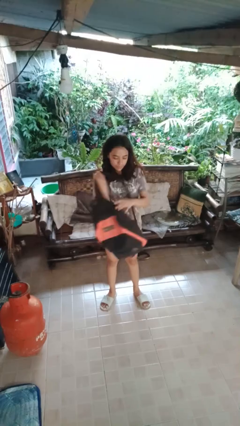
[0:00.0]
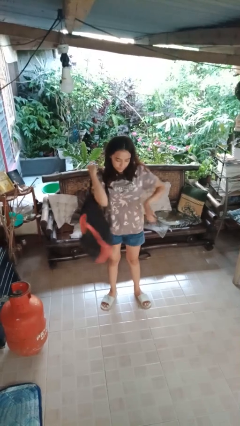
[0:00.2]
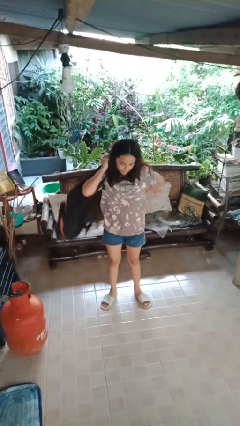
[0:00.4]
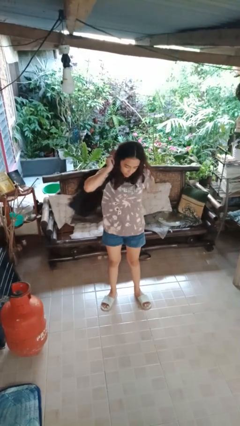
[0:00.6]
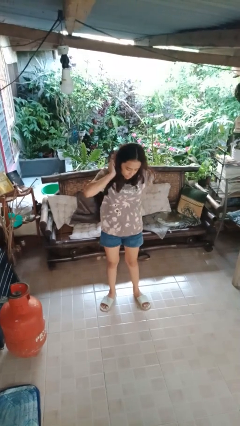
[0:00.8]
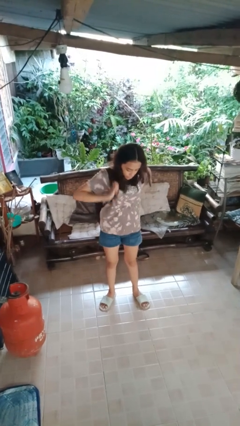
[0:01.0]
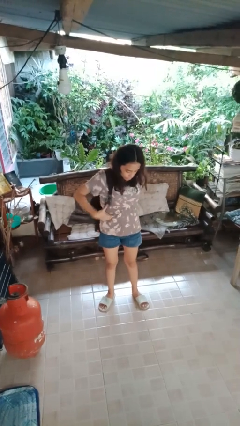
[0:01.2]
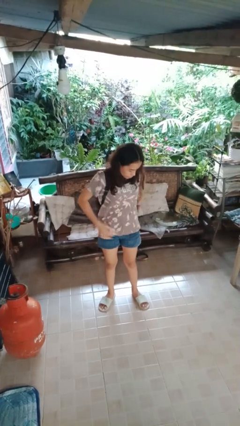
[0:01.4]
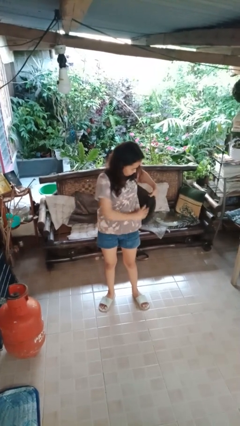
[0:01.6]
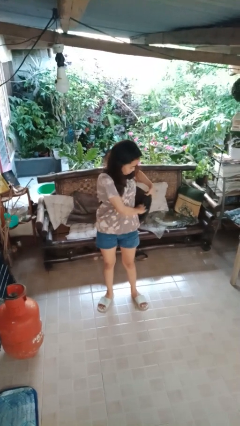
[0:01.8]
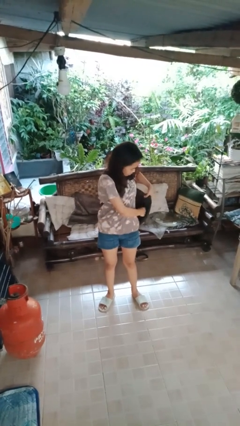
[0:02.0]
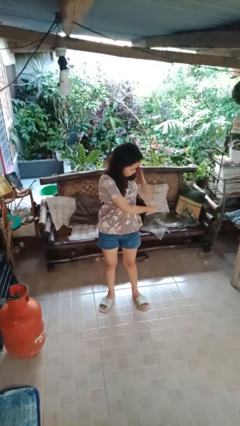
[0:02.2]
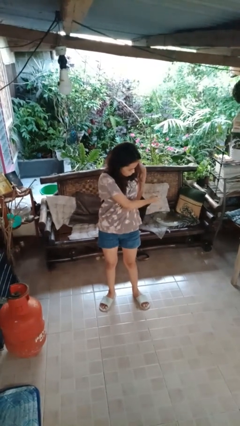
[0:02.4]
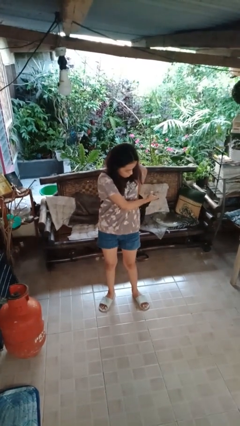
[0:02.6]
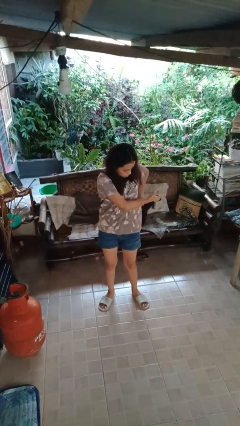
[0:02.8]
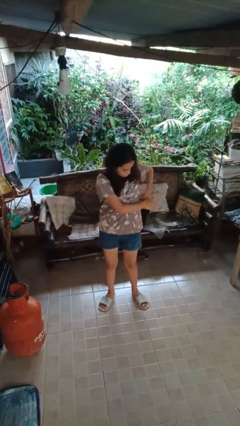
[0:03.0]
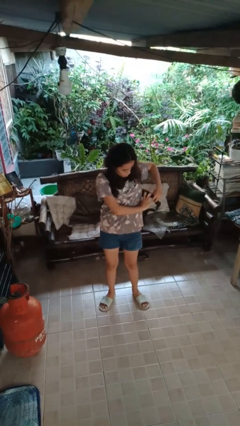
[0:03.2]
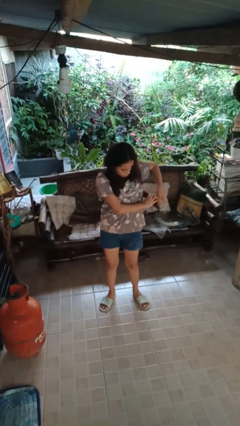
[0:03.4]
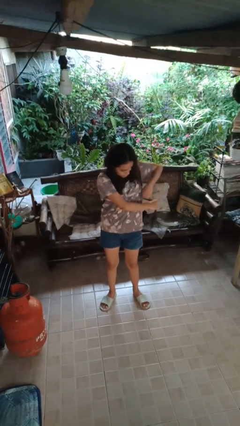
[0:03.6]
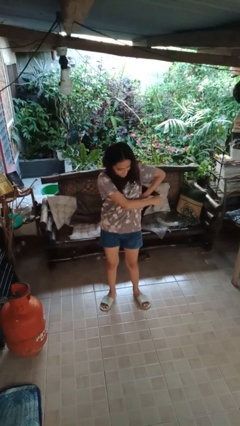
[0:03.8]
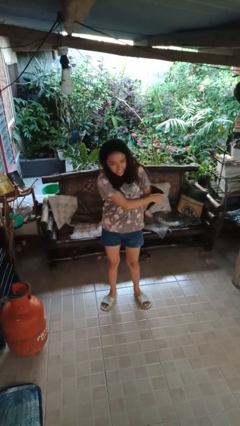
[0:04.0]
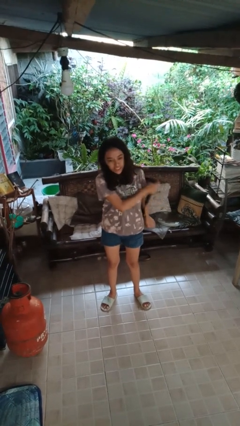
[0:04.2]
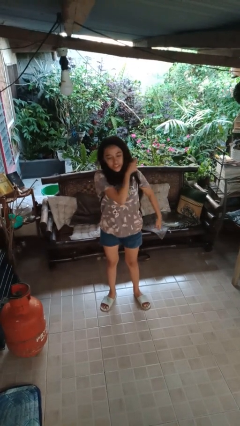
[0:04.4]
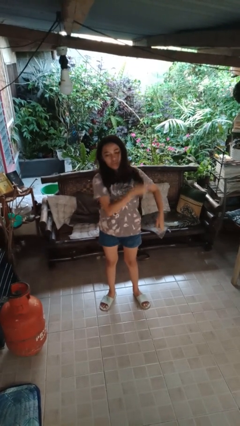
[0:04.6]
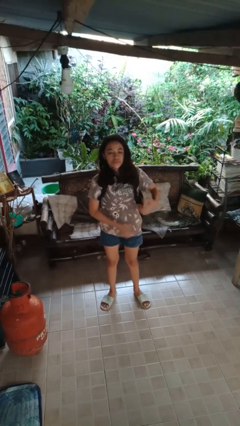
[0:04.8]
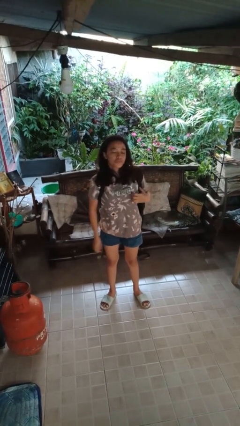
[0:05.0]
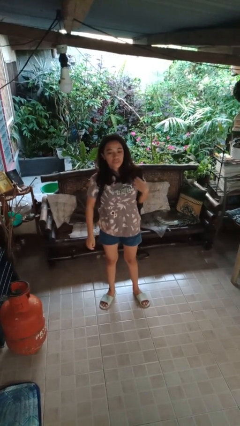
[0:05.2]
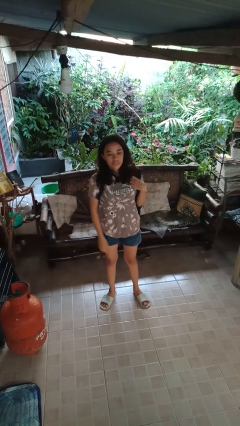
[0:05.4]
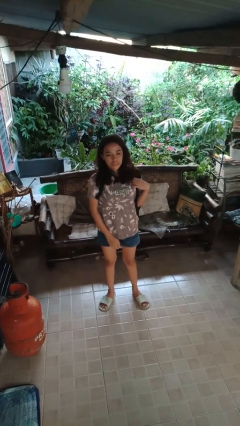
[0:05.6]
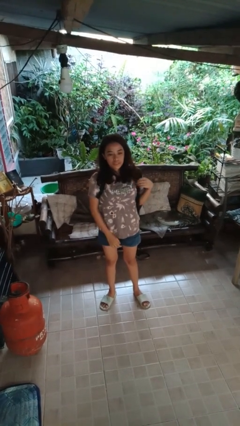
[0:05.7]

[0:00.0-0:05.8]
person puts on backpack

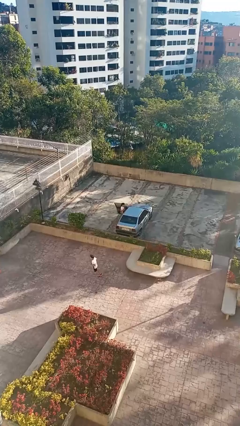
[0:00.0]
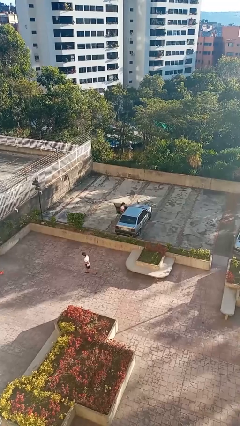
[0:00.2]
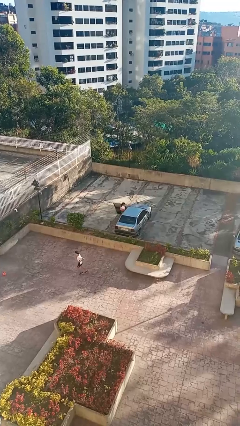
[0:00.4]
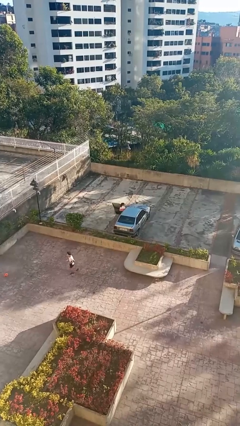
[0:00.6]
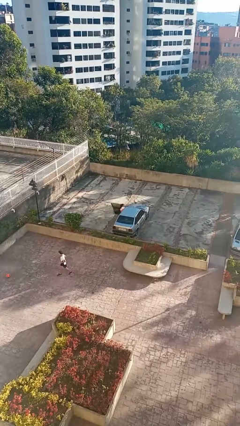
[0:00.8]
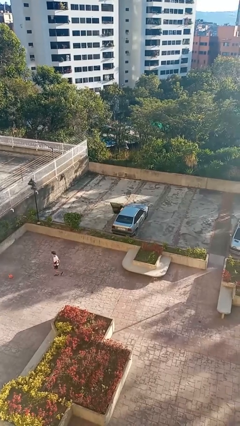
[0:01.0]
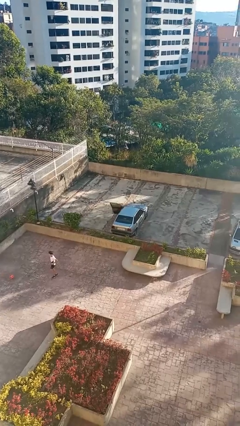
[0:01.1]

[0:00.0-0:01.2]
person enters car

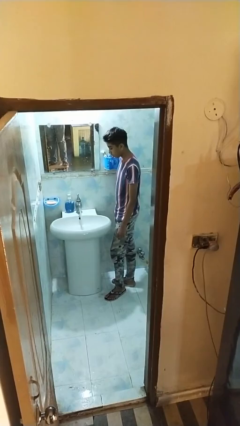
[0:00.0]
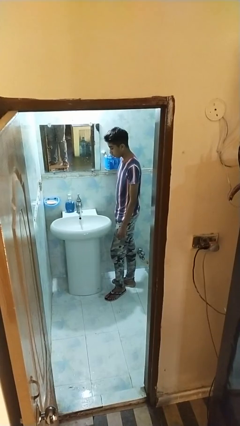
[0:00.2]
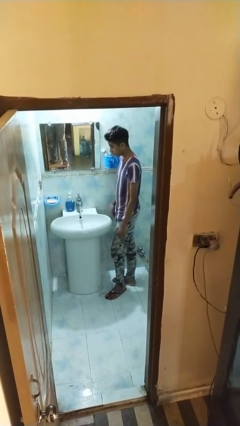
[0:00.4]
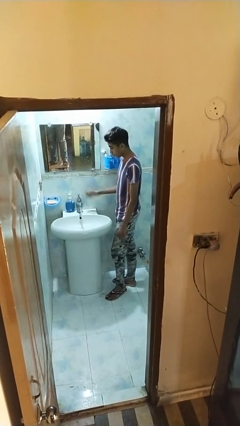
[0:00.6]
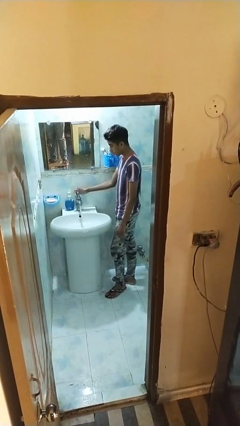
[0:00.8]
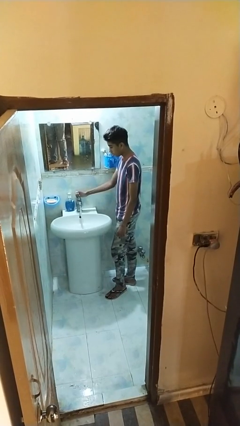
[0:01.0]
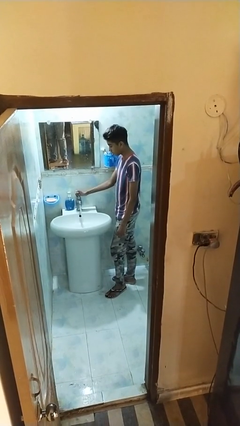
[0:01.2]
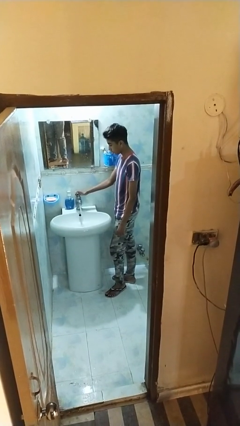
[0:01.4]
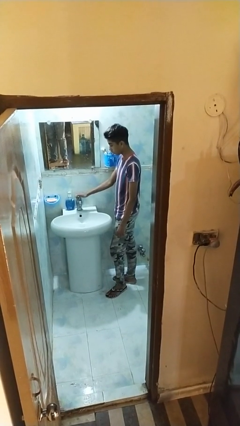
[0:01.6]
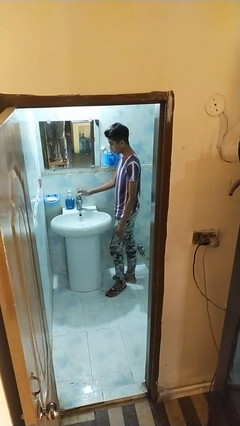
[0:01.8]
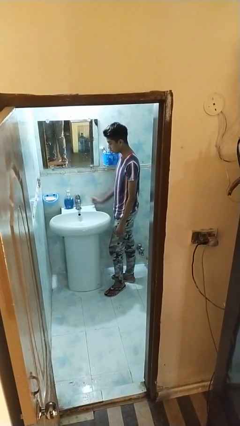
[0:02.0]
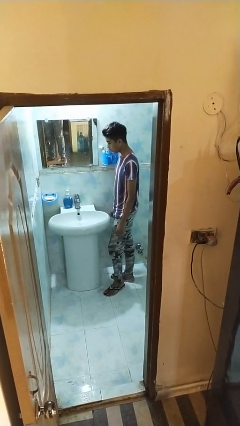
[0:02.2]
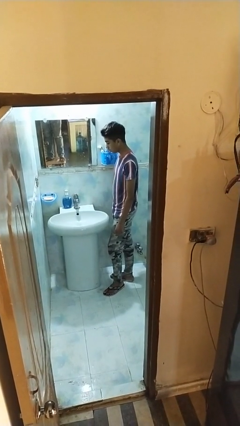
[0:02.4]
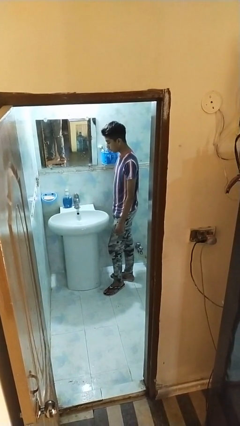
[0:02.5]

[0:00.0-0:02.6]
person turns off faucet

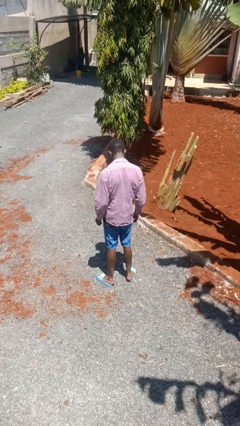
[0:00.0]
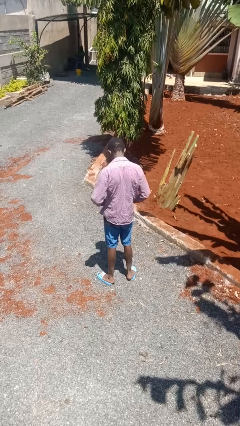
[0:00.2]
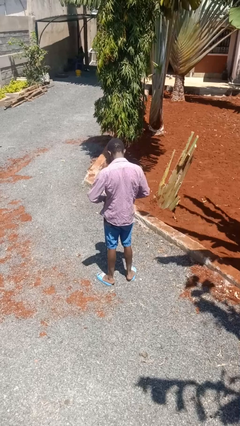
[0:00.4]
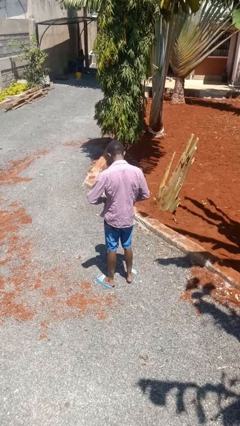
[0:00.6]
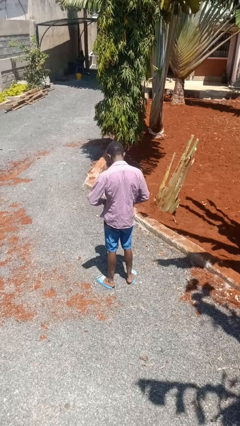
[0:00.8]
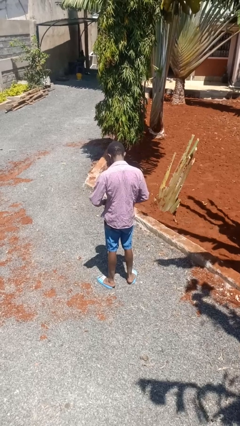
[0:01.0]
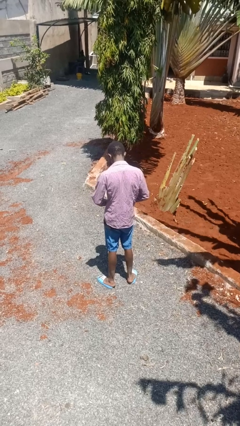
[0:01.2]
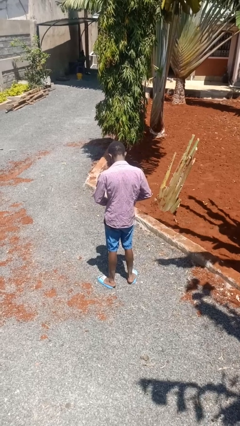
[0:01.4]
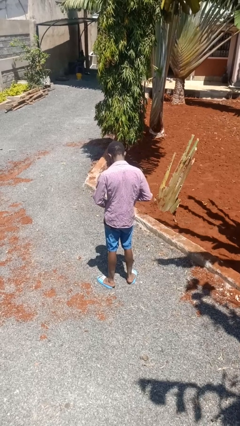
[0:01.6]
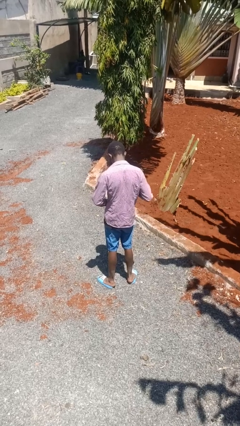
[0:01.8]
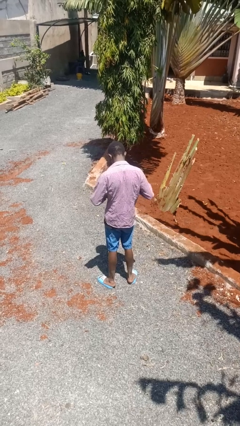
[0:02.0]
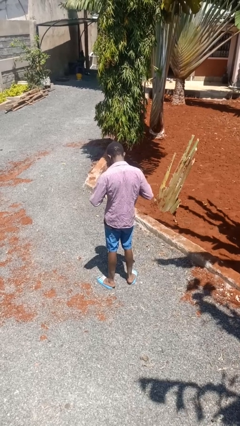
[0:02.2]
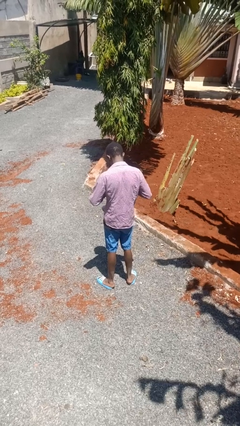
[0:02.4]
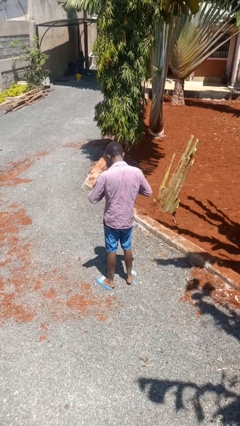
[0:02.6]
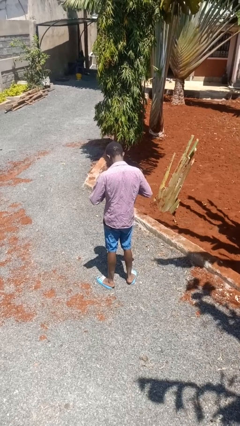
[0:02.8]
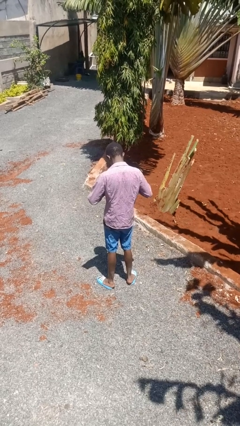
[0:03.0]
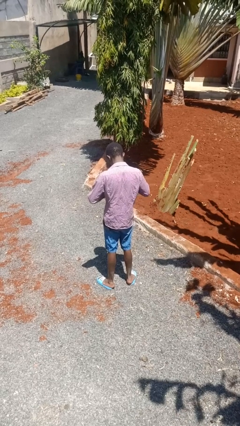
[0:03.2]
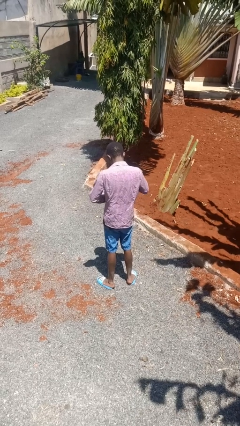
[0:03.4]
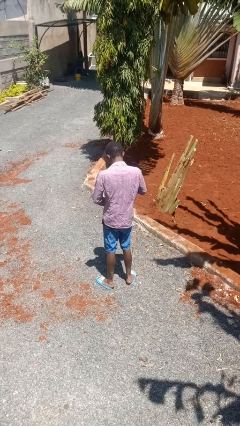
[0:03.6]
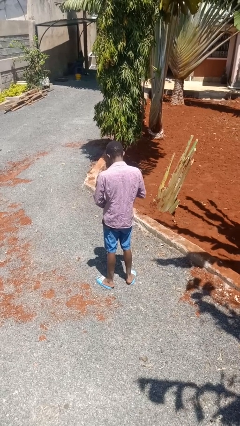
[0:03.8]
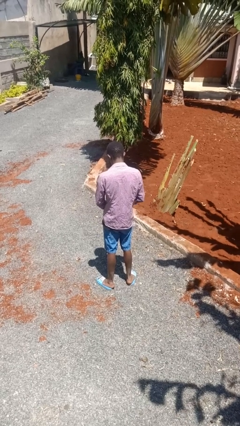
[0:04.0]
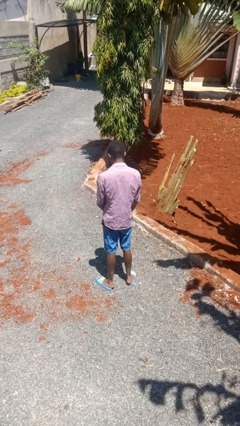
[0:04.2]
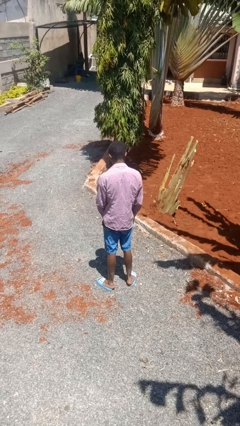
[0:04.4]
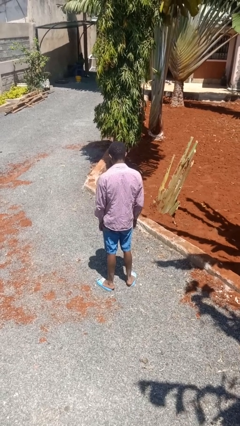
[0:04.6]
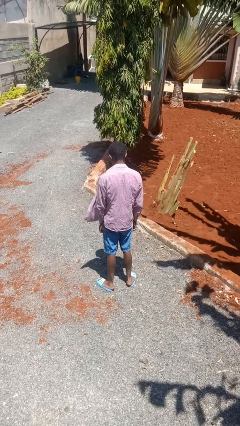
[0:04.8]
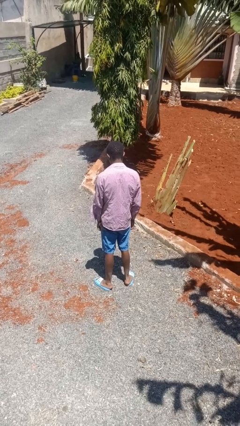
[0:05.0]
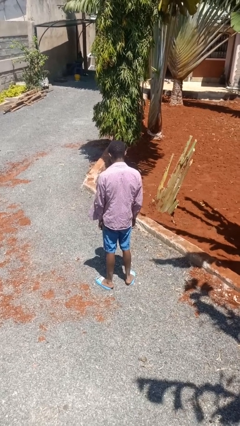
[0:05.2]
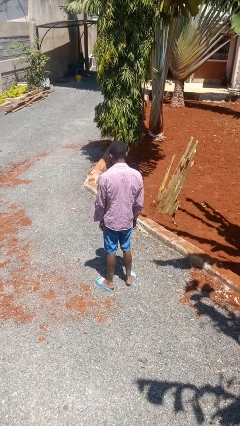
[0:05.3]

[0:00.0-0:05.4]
person buttons shirt

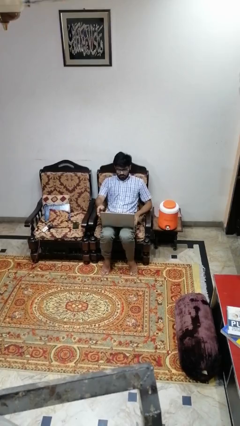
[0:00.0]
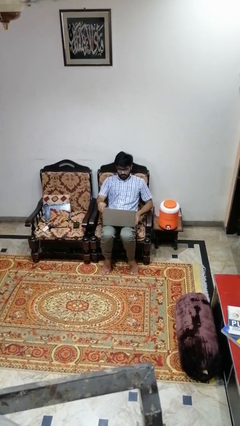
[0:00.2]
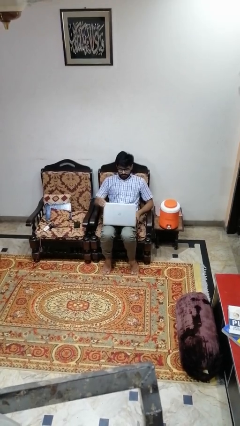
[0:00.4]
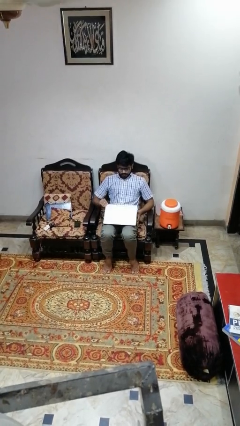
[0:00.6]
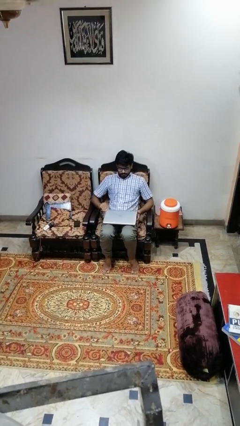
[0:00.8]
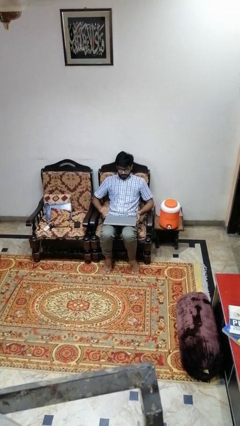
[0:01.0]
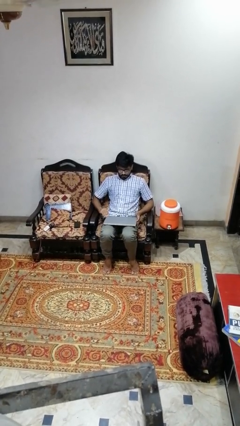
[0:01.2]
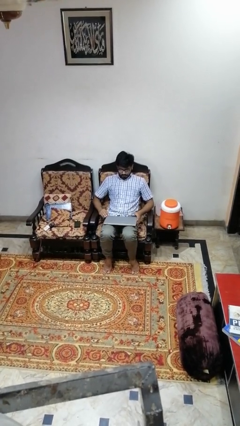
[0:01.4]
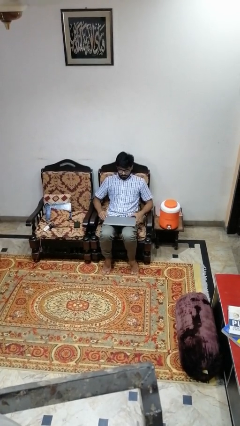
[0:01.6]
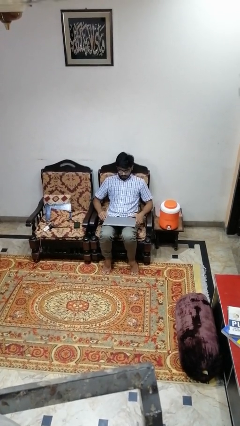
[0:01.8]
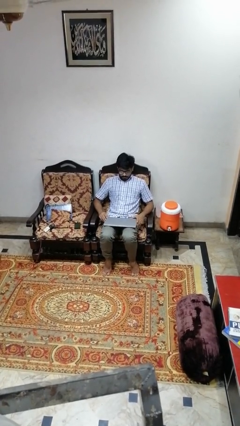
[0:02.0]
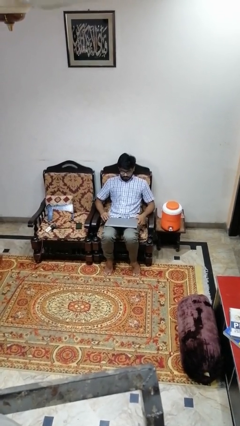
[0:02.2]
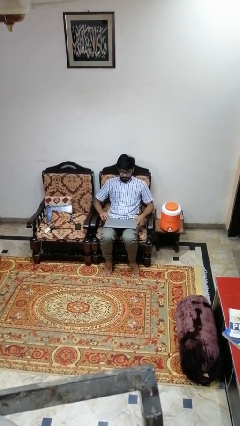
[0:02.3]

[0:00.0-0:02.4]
person closes laptop
